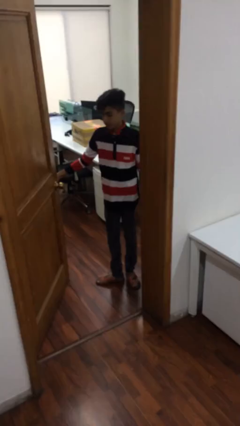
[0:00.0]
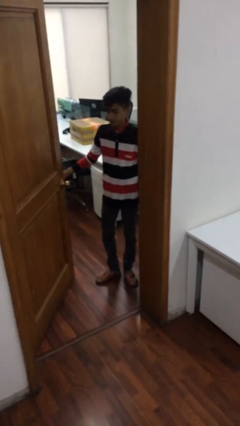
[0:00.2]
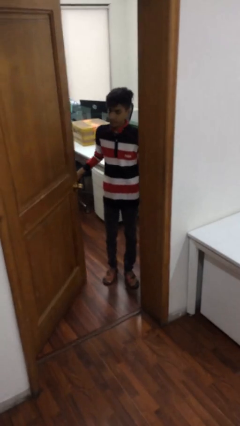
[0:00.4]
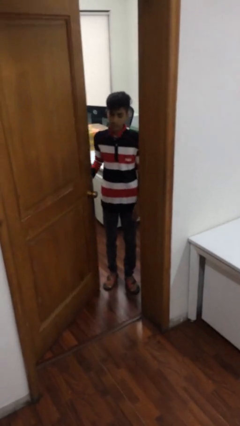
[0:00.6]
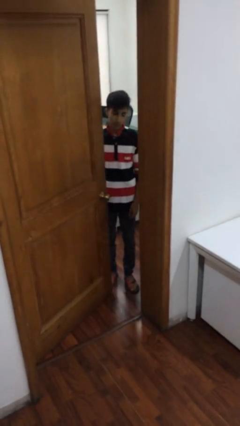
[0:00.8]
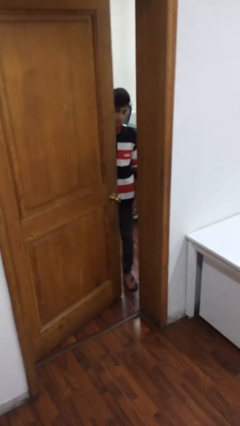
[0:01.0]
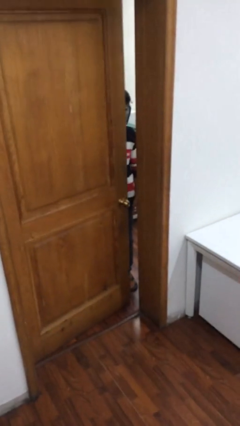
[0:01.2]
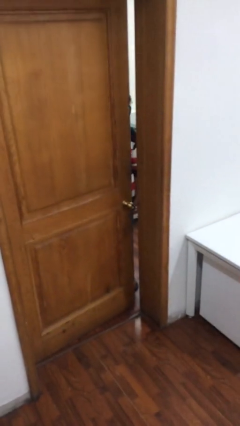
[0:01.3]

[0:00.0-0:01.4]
person closes facility door

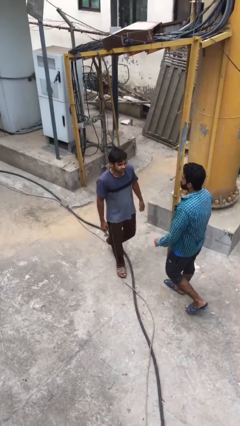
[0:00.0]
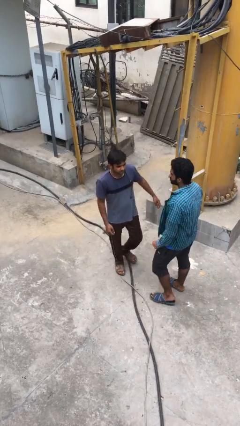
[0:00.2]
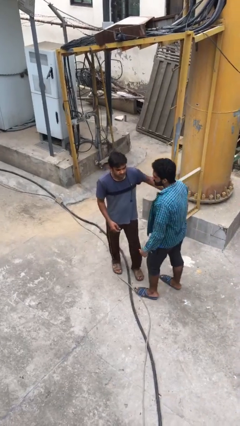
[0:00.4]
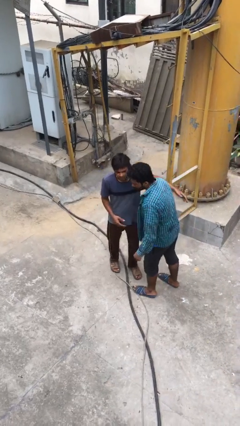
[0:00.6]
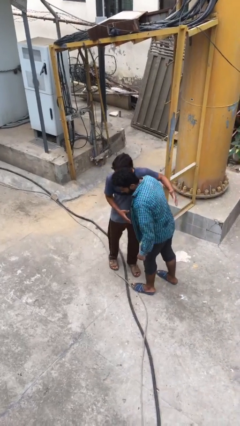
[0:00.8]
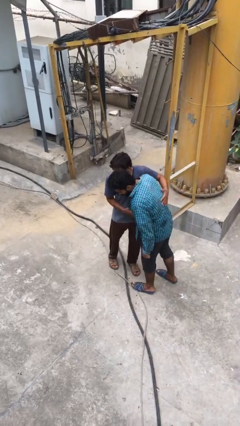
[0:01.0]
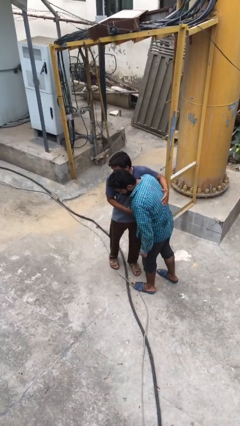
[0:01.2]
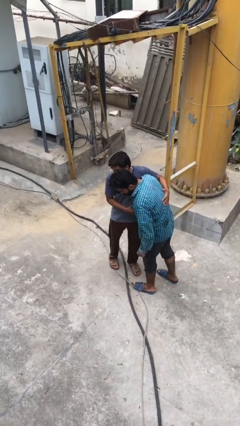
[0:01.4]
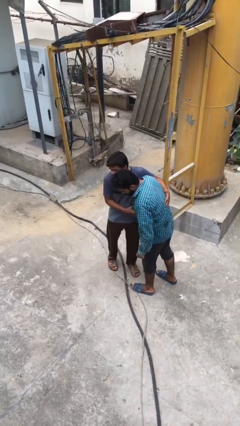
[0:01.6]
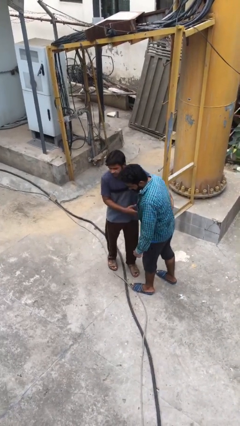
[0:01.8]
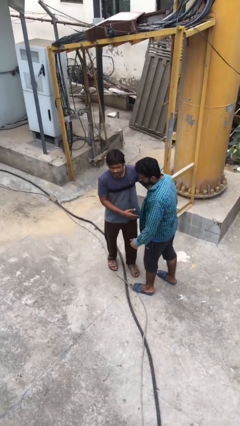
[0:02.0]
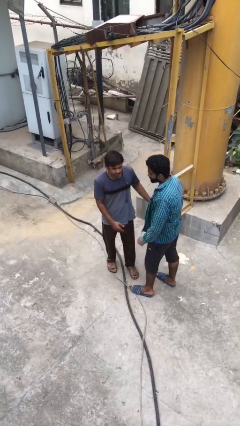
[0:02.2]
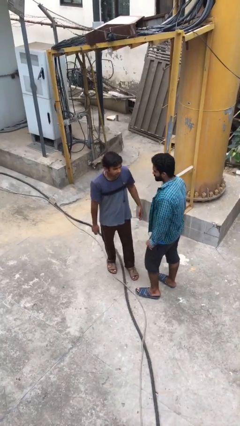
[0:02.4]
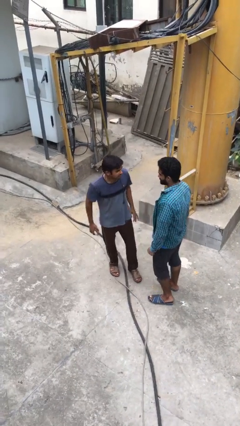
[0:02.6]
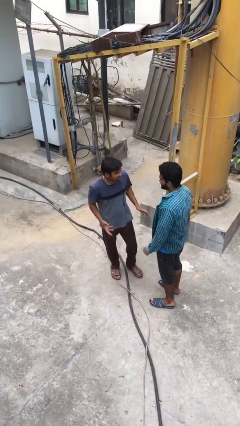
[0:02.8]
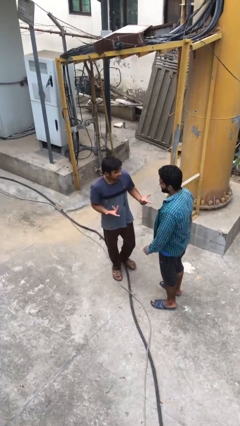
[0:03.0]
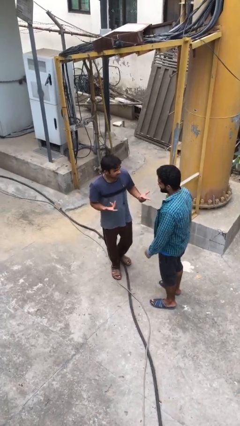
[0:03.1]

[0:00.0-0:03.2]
person embraces person

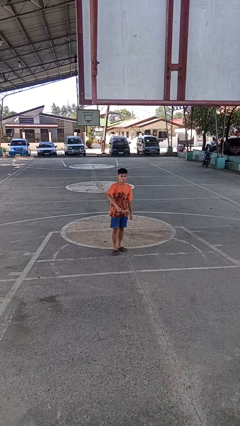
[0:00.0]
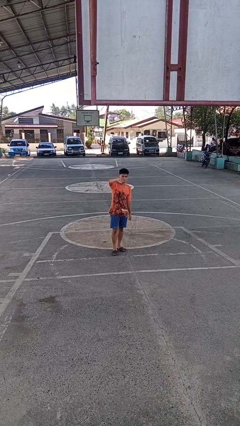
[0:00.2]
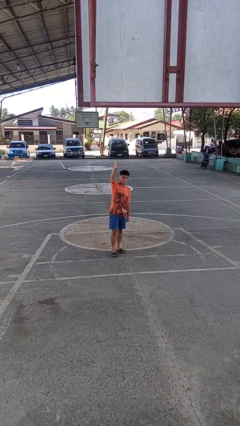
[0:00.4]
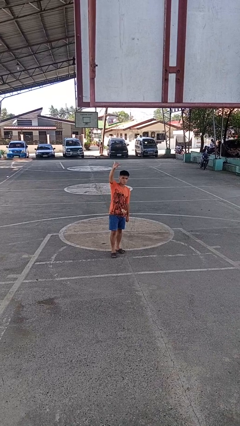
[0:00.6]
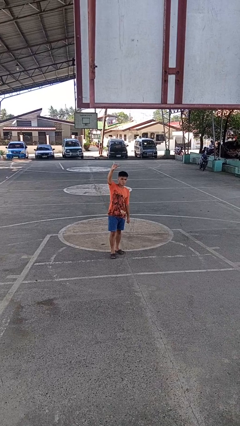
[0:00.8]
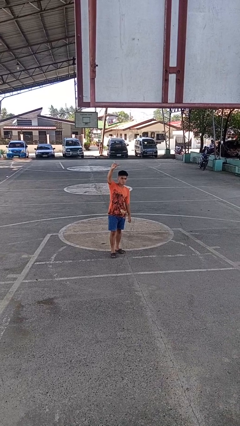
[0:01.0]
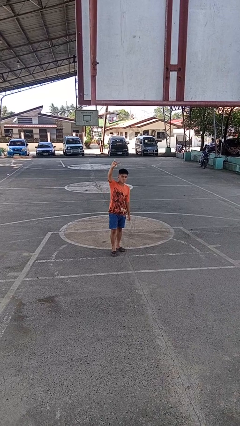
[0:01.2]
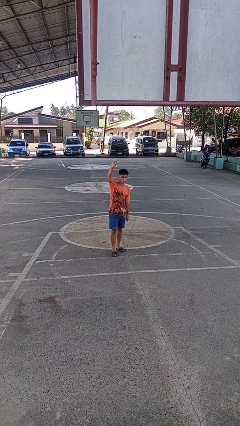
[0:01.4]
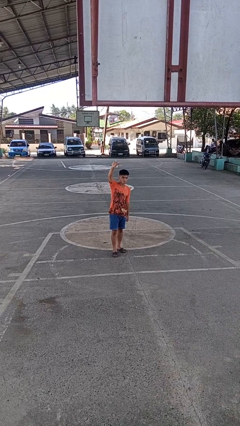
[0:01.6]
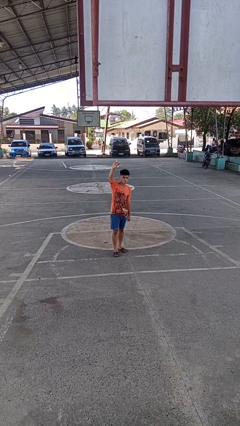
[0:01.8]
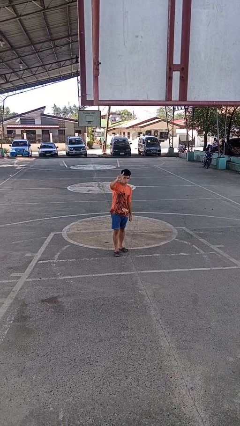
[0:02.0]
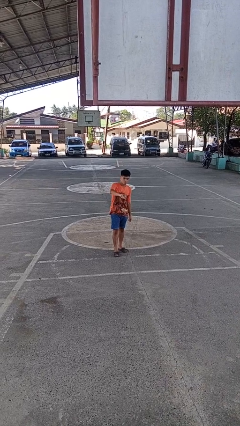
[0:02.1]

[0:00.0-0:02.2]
person gestures swipe up

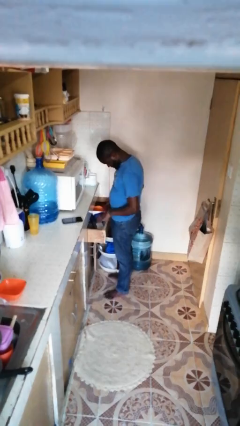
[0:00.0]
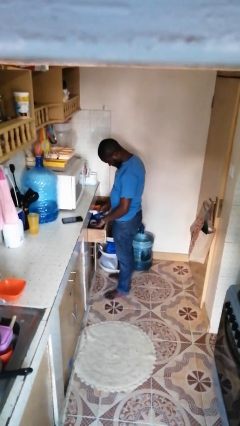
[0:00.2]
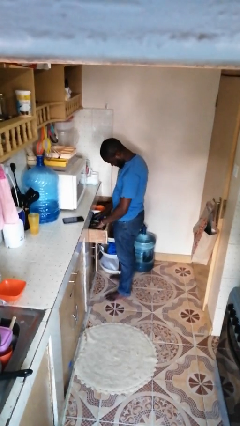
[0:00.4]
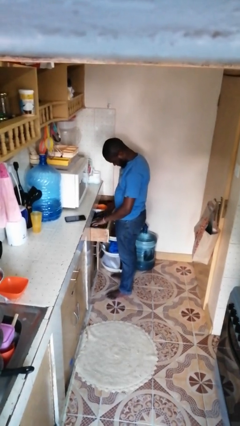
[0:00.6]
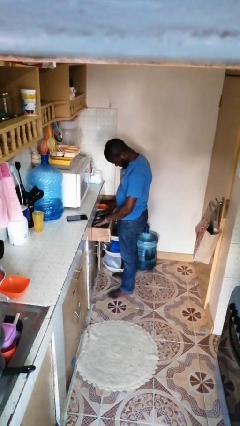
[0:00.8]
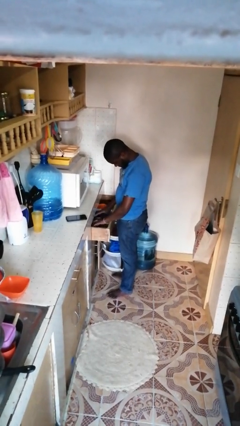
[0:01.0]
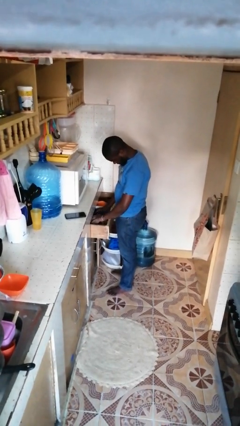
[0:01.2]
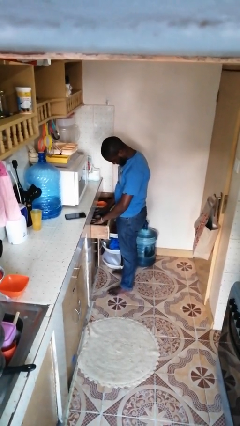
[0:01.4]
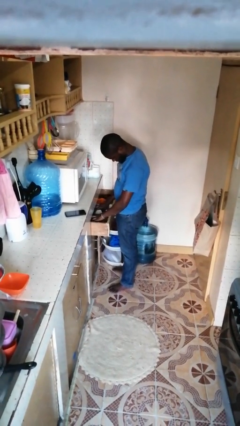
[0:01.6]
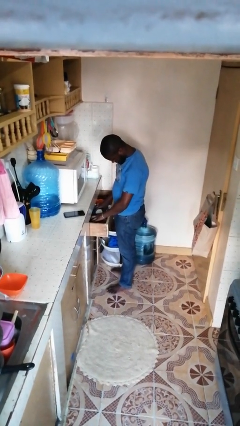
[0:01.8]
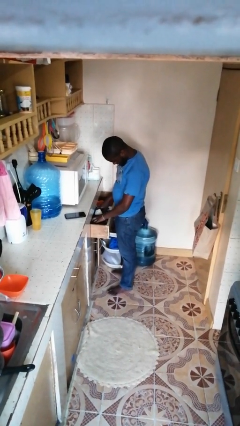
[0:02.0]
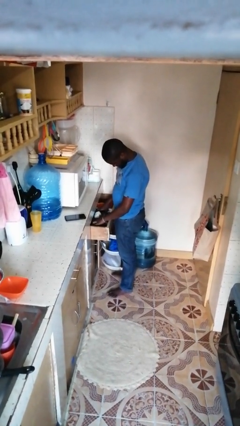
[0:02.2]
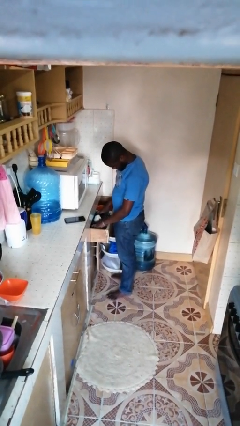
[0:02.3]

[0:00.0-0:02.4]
person searches in kitchen drawer

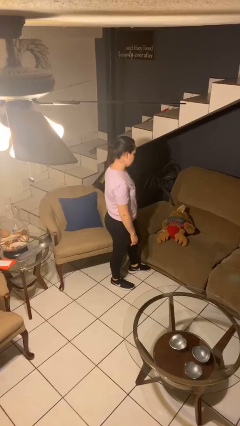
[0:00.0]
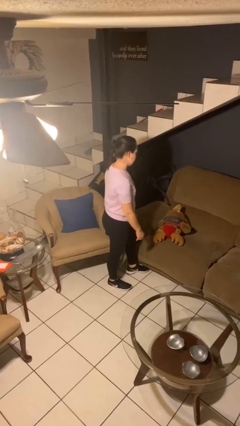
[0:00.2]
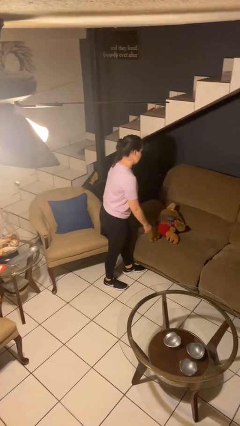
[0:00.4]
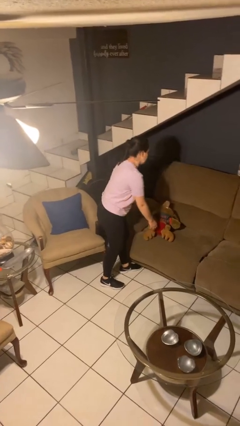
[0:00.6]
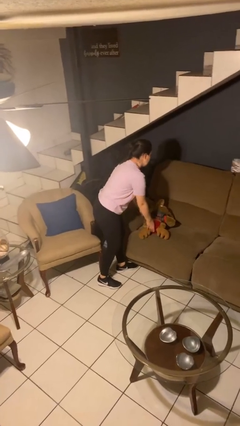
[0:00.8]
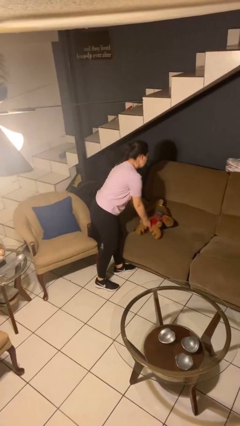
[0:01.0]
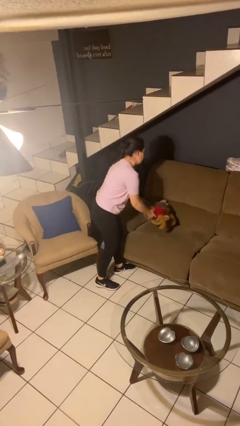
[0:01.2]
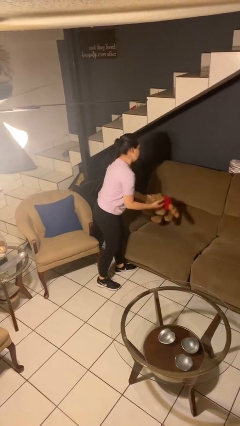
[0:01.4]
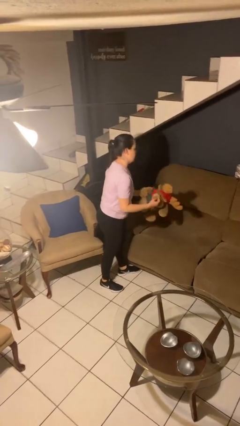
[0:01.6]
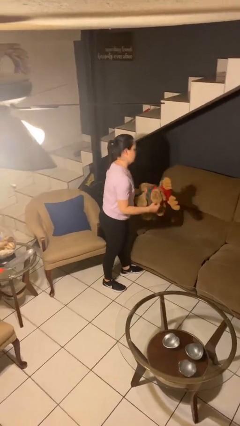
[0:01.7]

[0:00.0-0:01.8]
person picks up object from couch

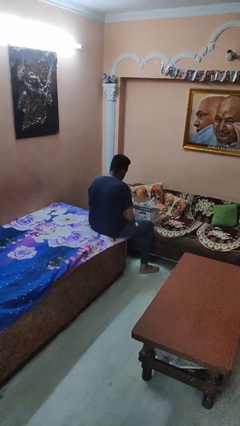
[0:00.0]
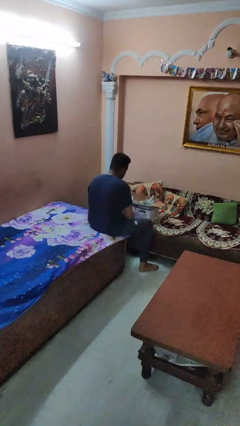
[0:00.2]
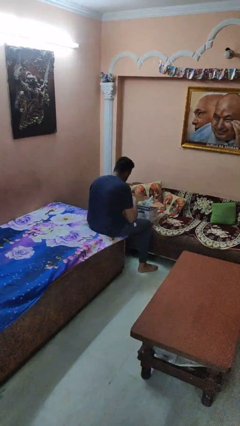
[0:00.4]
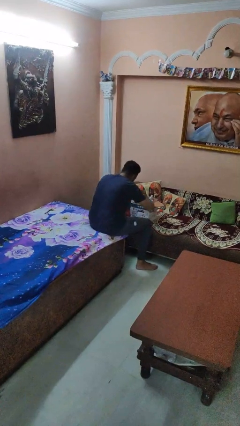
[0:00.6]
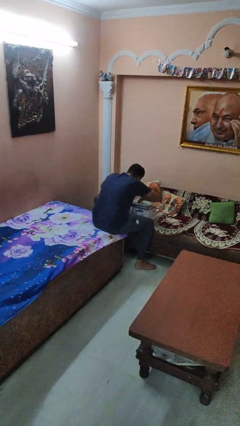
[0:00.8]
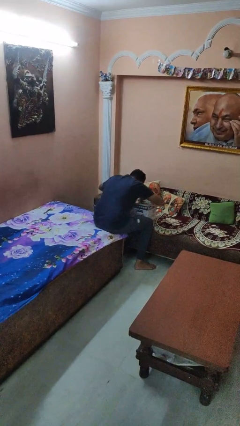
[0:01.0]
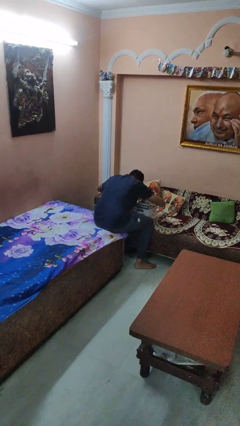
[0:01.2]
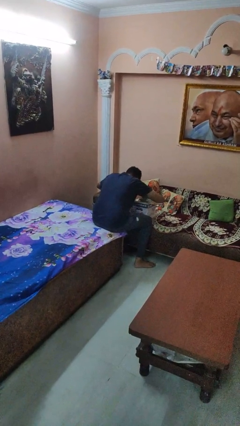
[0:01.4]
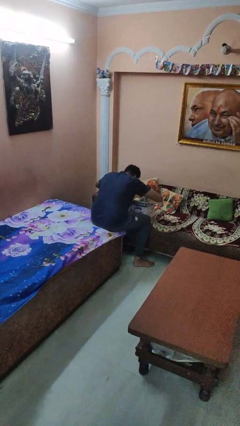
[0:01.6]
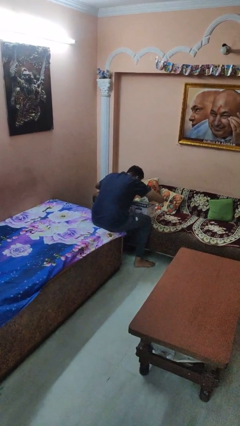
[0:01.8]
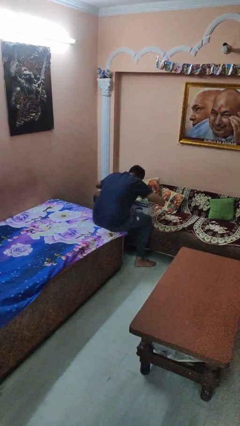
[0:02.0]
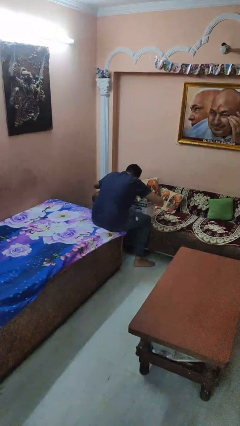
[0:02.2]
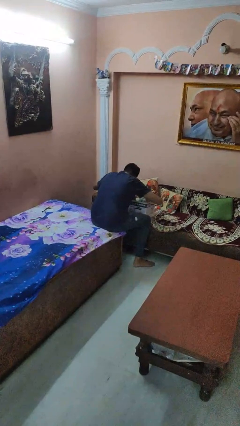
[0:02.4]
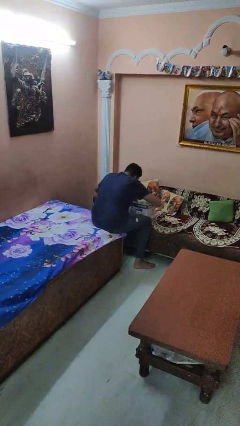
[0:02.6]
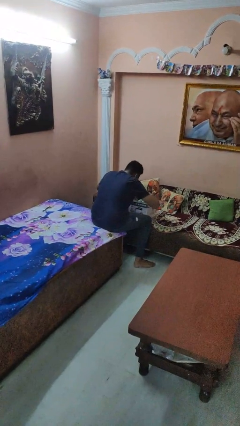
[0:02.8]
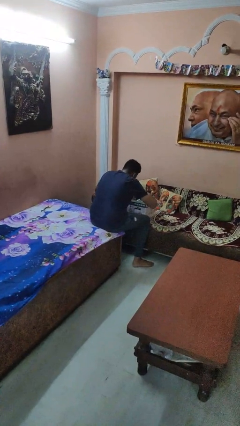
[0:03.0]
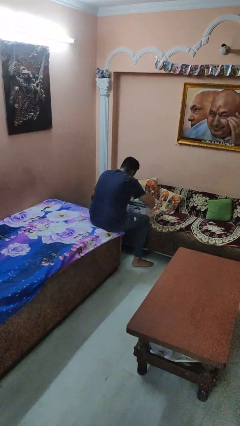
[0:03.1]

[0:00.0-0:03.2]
person searches in box

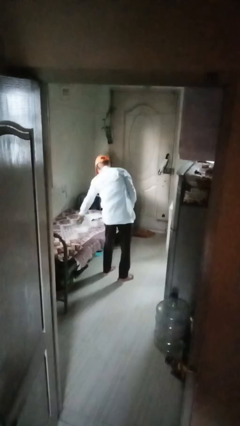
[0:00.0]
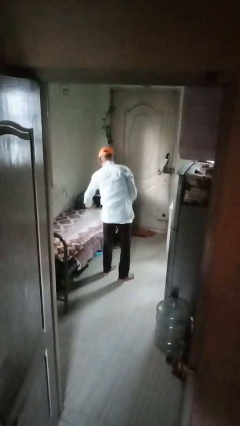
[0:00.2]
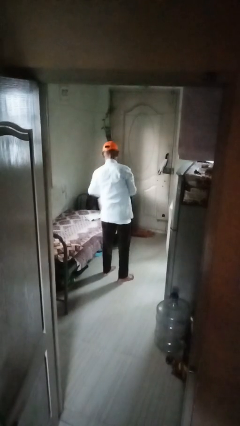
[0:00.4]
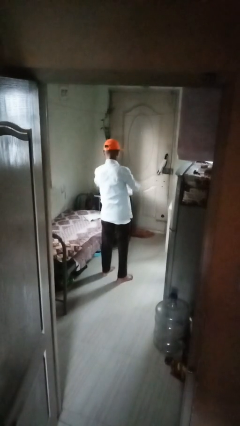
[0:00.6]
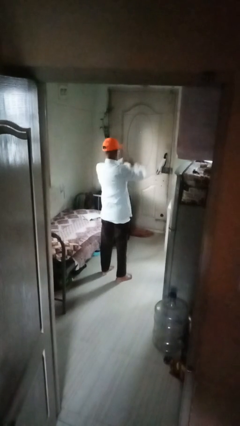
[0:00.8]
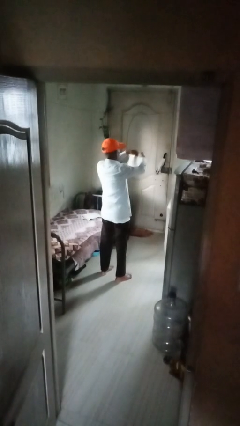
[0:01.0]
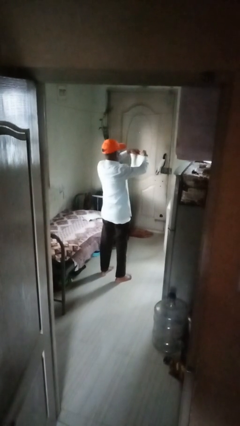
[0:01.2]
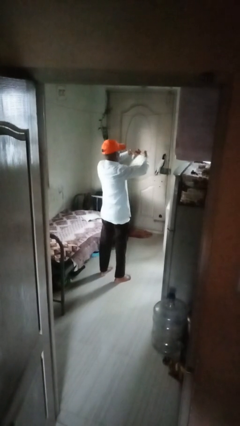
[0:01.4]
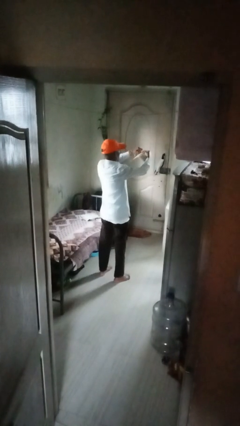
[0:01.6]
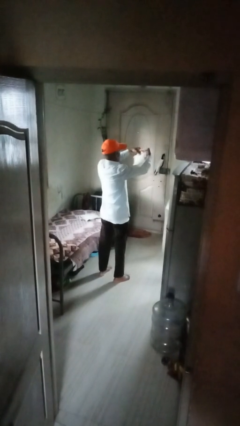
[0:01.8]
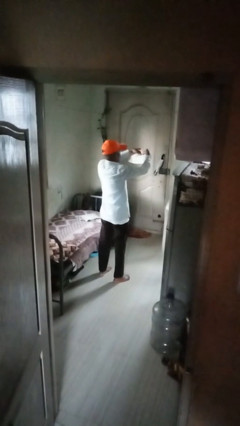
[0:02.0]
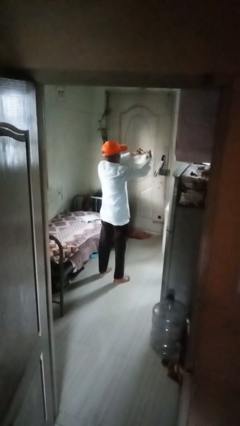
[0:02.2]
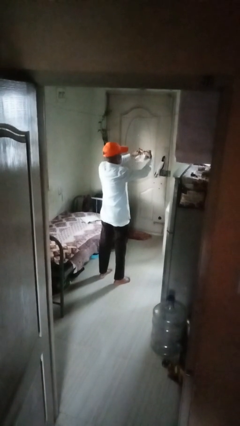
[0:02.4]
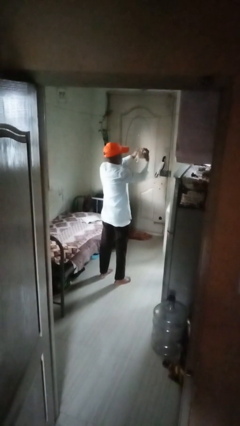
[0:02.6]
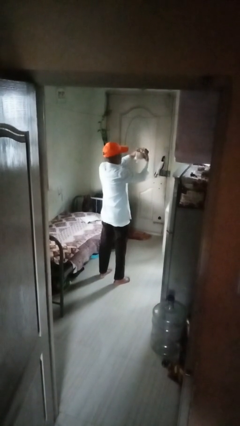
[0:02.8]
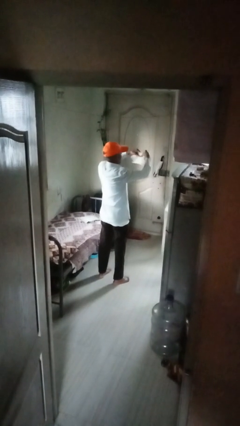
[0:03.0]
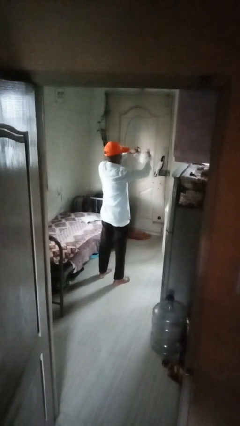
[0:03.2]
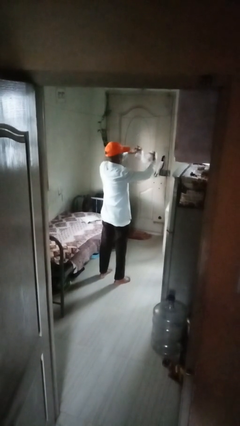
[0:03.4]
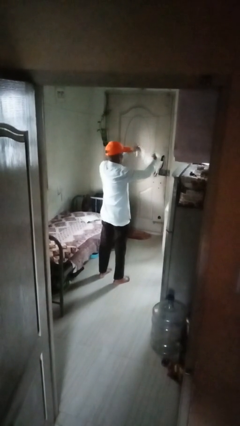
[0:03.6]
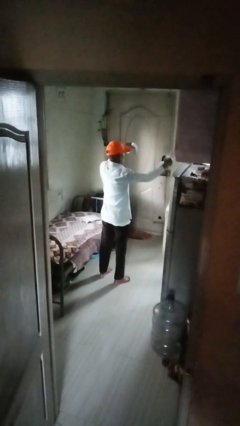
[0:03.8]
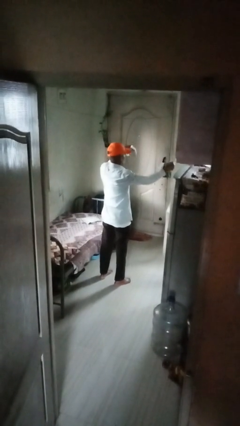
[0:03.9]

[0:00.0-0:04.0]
person tears paper
